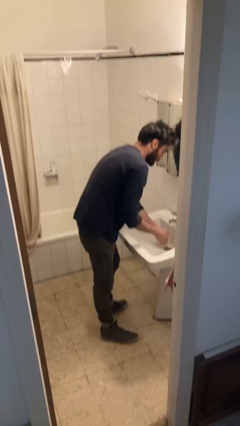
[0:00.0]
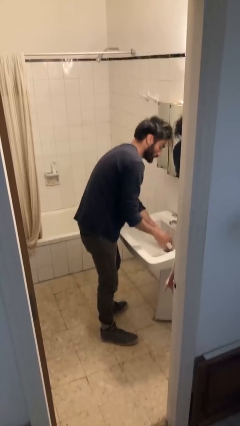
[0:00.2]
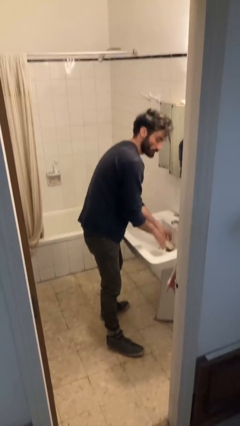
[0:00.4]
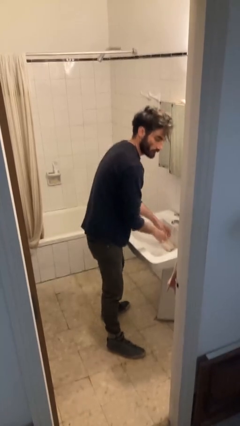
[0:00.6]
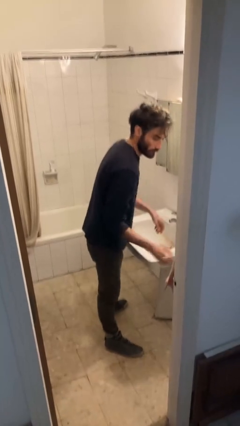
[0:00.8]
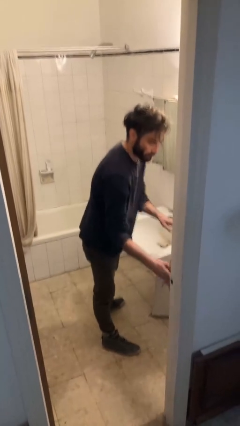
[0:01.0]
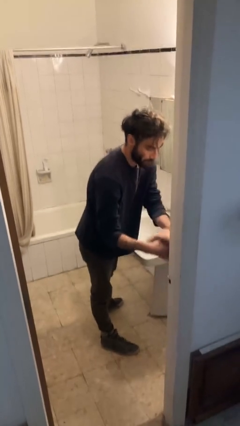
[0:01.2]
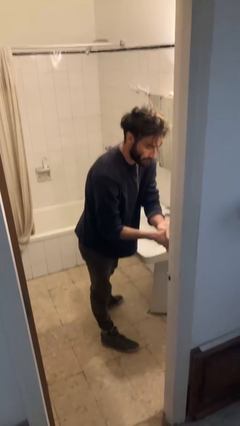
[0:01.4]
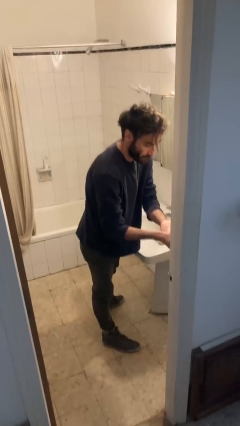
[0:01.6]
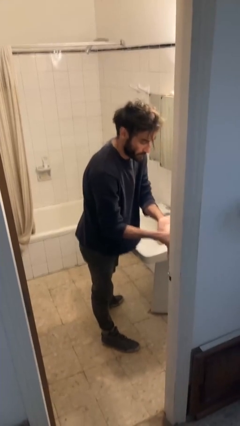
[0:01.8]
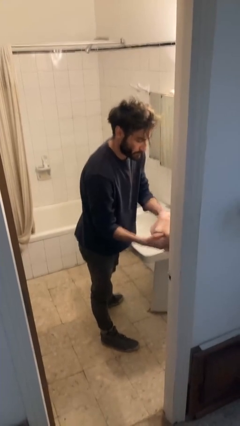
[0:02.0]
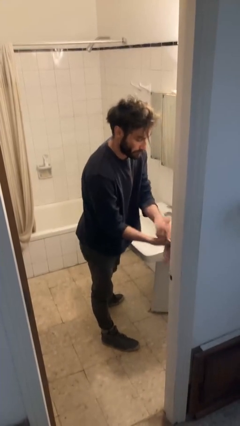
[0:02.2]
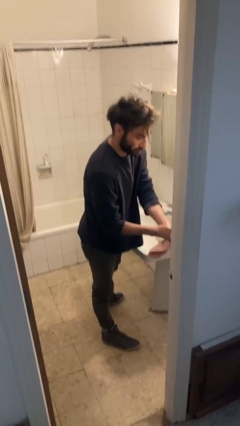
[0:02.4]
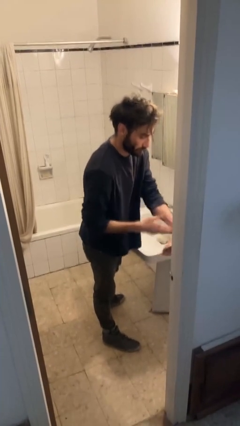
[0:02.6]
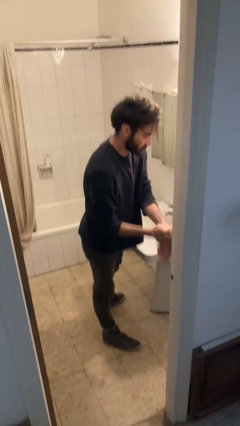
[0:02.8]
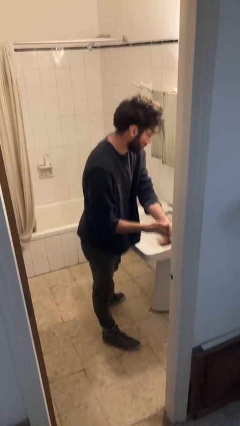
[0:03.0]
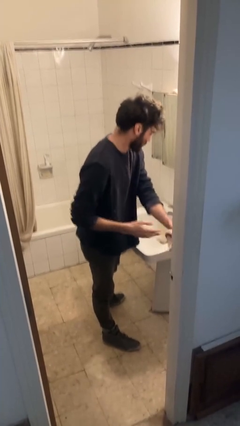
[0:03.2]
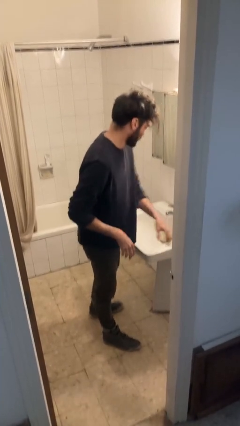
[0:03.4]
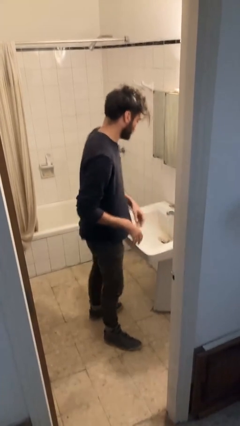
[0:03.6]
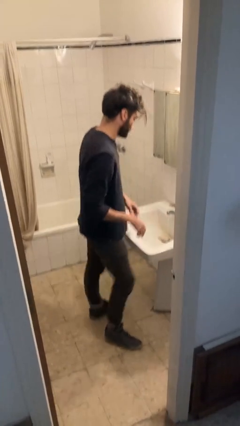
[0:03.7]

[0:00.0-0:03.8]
person dries hands with towel

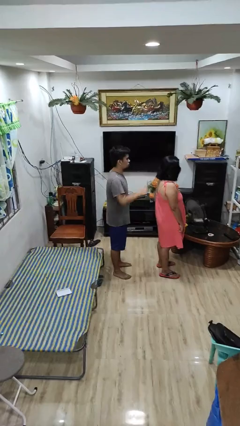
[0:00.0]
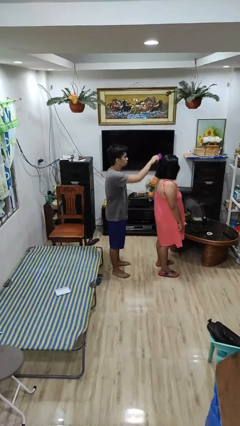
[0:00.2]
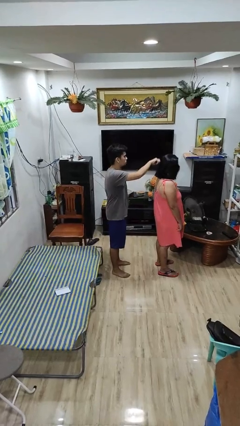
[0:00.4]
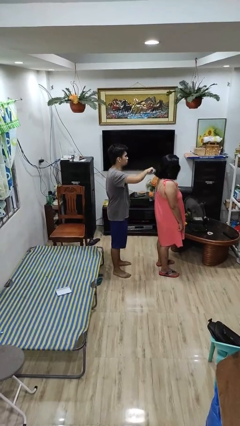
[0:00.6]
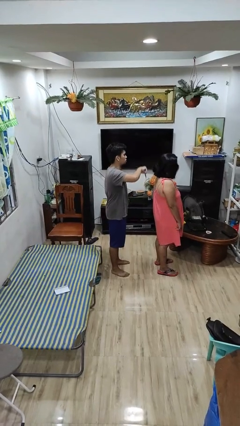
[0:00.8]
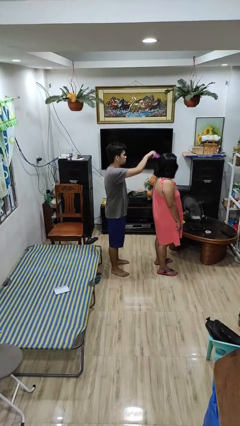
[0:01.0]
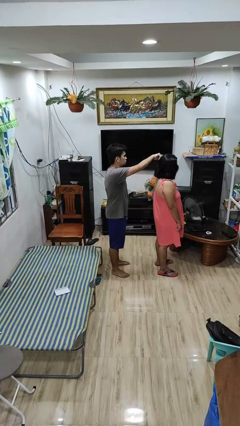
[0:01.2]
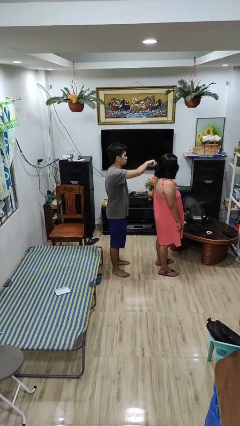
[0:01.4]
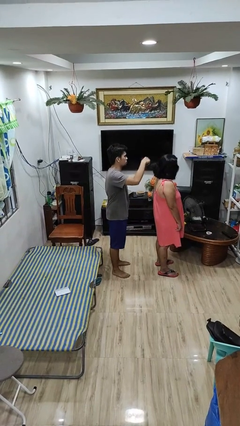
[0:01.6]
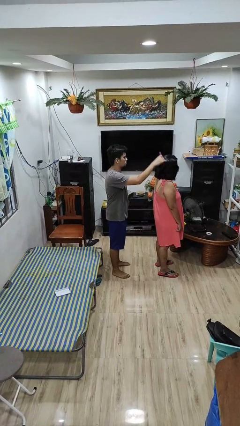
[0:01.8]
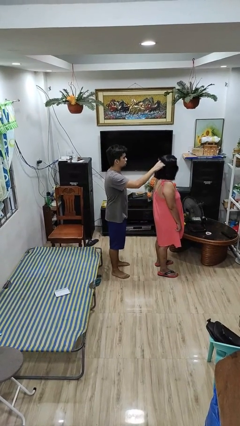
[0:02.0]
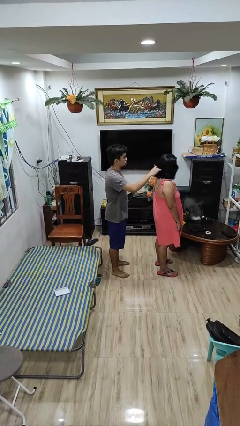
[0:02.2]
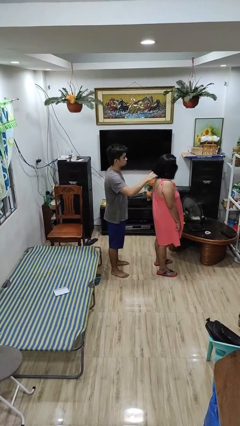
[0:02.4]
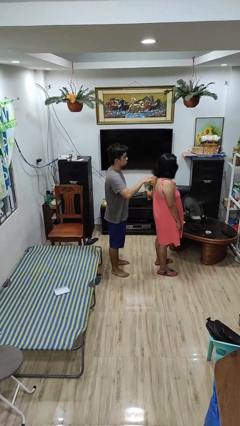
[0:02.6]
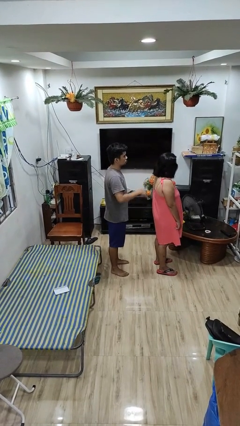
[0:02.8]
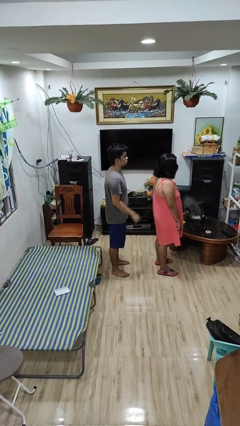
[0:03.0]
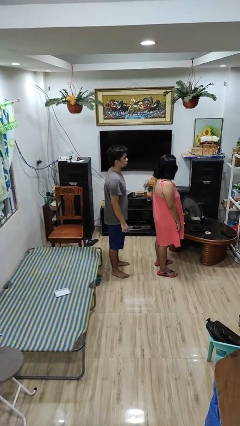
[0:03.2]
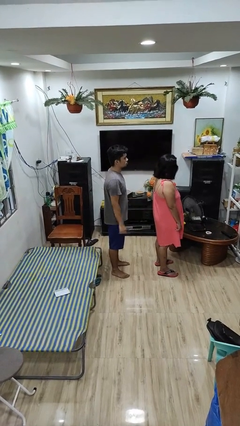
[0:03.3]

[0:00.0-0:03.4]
person brushes hair of person

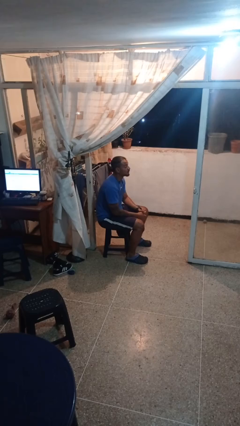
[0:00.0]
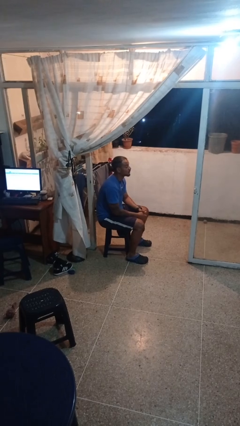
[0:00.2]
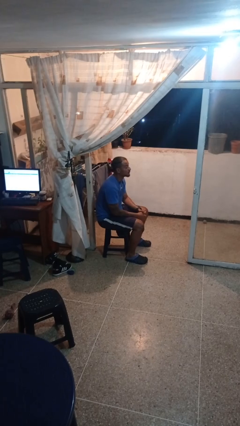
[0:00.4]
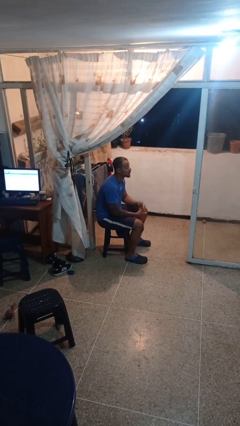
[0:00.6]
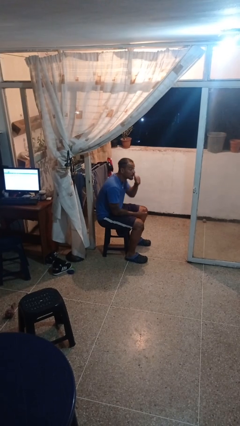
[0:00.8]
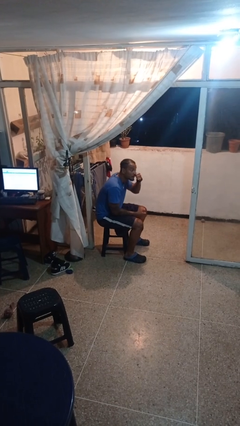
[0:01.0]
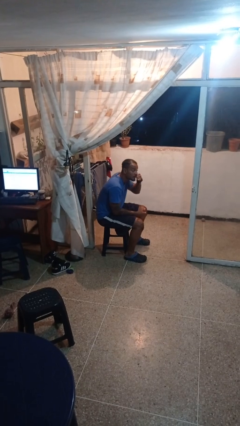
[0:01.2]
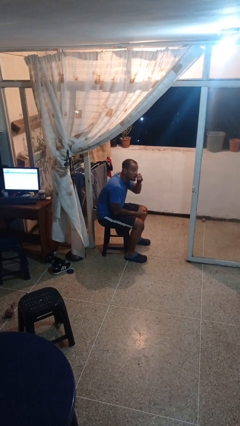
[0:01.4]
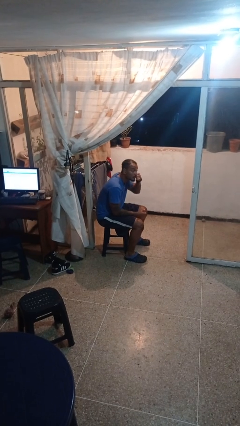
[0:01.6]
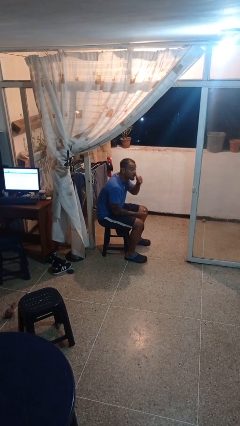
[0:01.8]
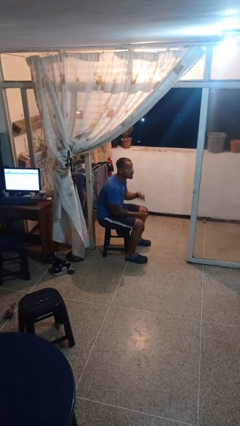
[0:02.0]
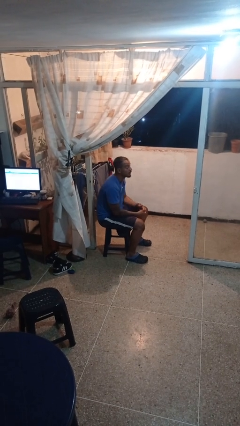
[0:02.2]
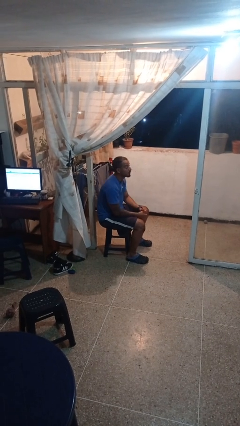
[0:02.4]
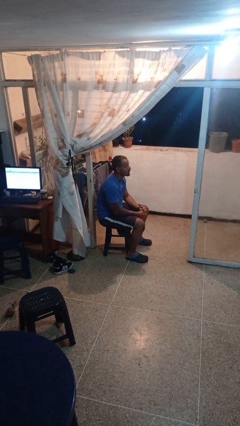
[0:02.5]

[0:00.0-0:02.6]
person gestures call me

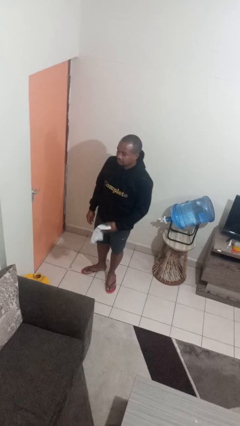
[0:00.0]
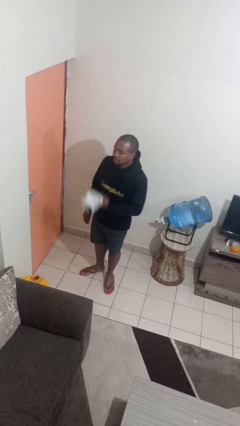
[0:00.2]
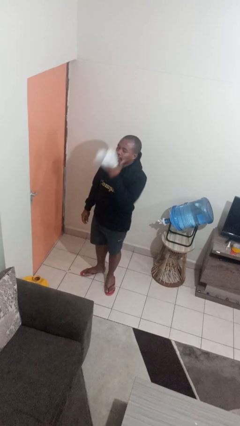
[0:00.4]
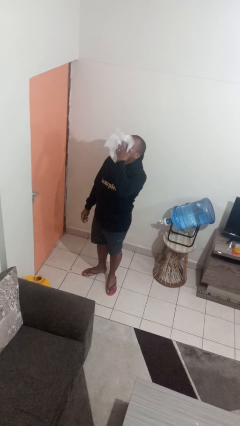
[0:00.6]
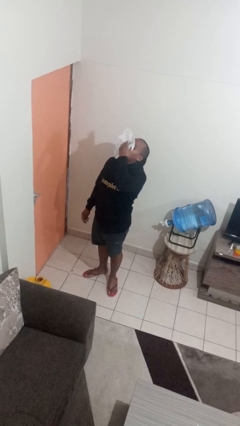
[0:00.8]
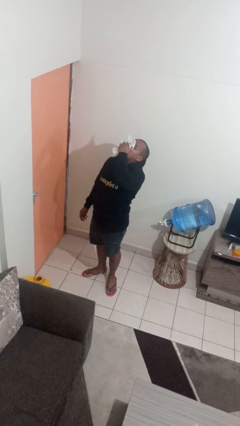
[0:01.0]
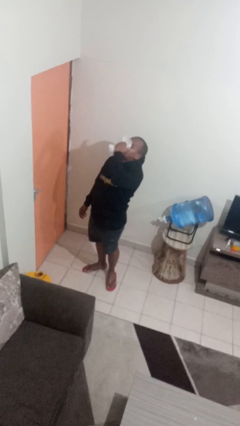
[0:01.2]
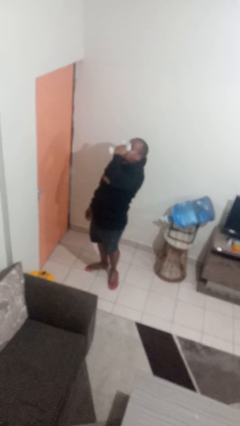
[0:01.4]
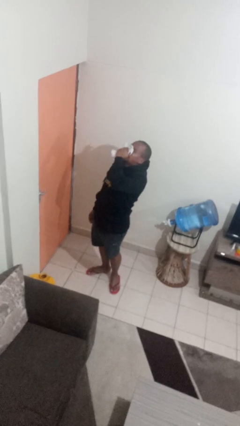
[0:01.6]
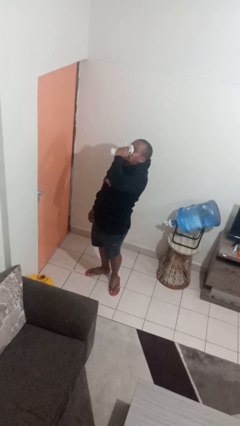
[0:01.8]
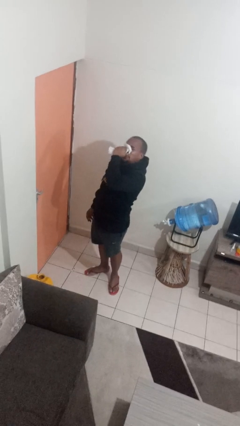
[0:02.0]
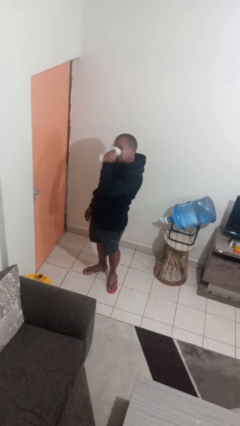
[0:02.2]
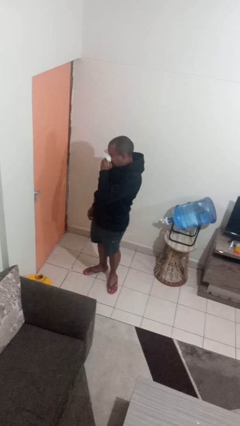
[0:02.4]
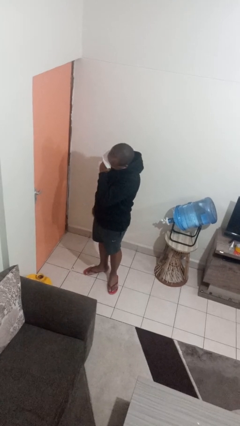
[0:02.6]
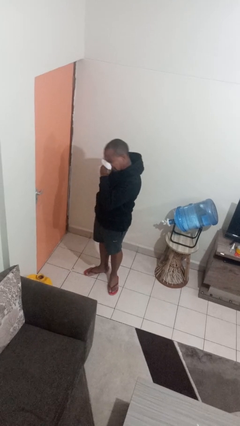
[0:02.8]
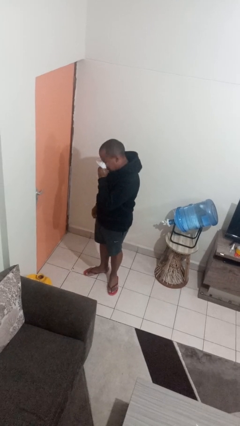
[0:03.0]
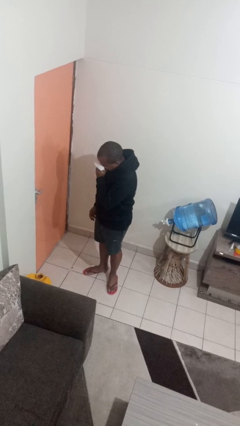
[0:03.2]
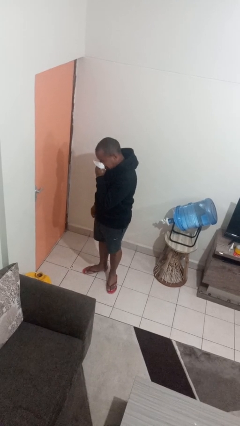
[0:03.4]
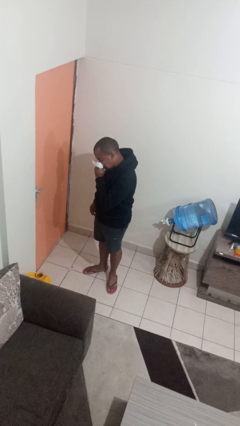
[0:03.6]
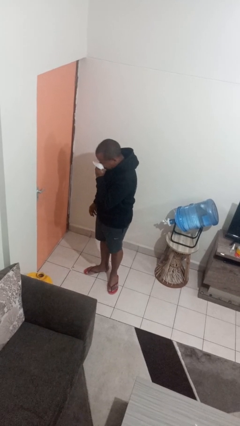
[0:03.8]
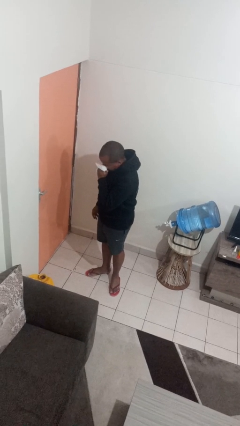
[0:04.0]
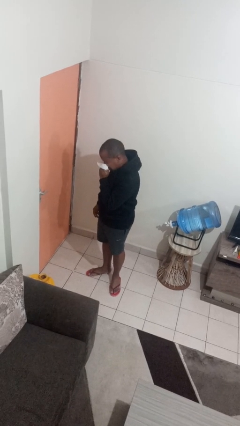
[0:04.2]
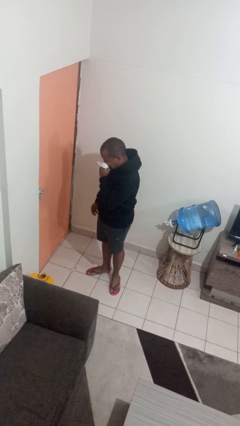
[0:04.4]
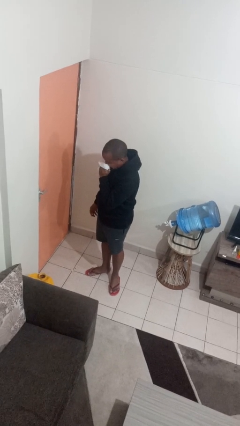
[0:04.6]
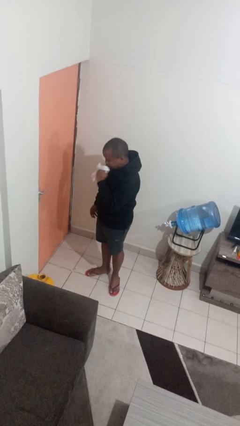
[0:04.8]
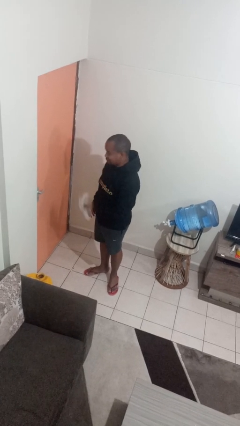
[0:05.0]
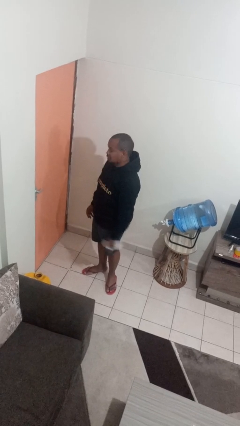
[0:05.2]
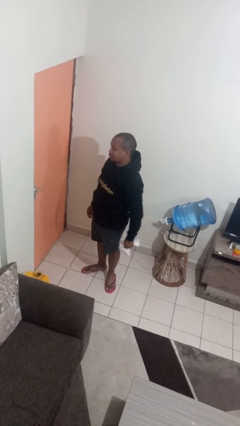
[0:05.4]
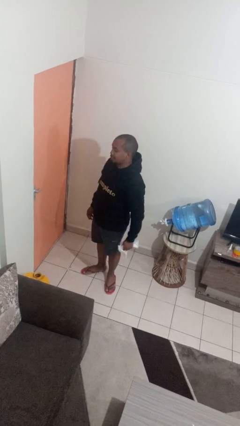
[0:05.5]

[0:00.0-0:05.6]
person blows nose

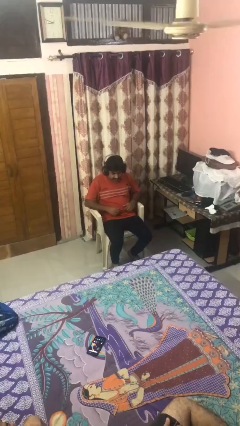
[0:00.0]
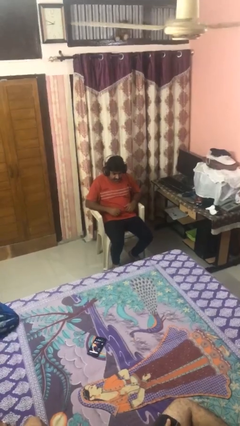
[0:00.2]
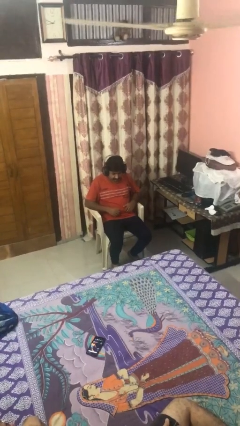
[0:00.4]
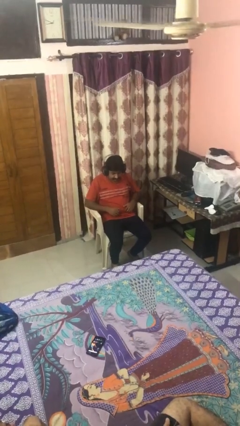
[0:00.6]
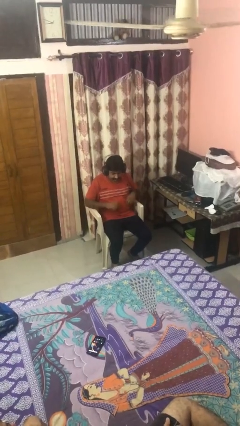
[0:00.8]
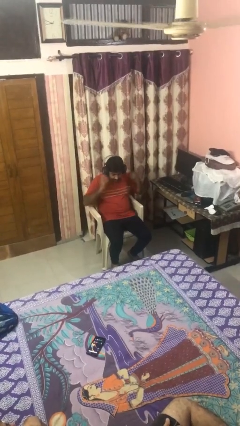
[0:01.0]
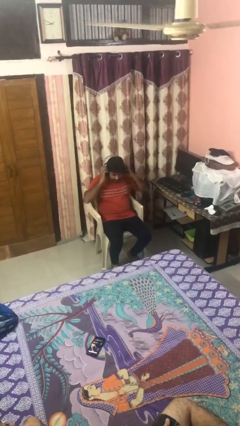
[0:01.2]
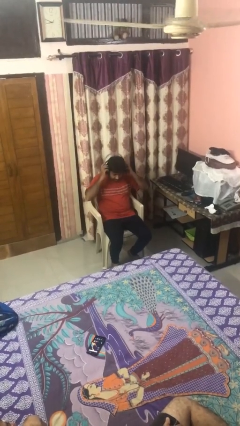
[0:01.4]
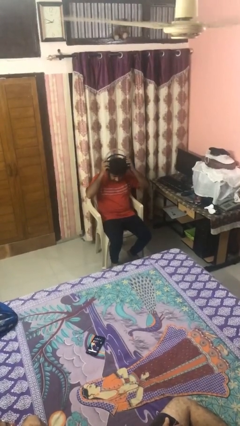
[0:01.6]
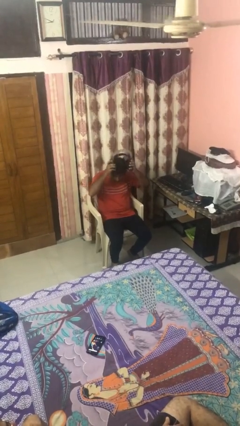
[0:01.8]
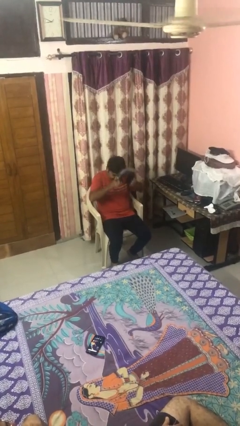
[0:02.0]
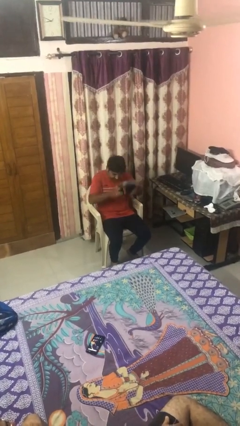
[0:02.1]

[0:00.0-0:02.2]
person takes off headphones
